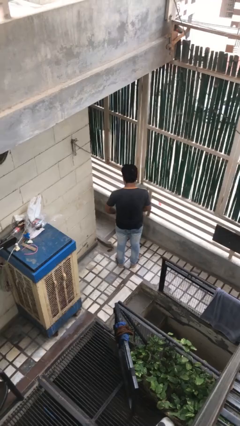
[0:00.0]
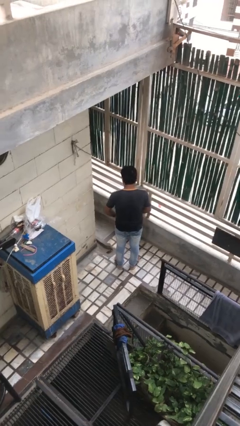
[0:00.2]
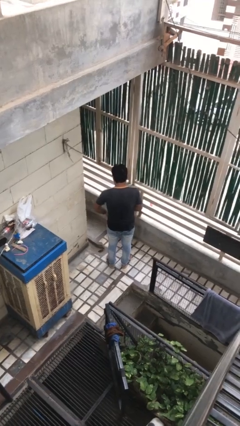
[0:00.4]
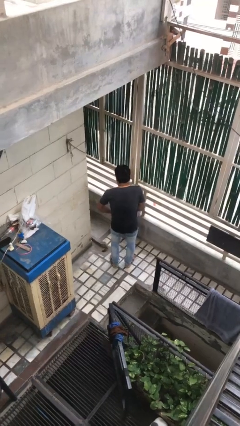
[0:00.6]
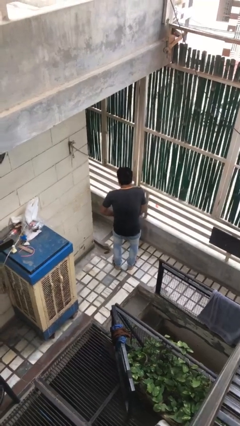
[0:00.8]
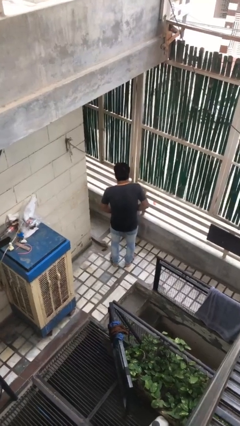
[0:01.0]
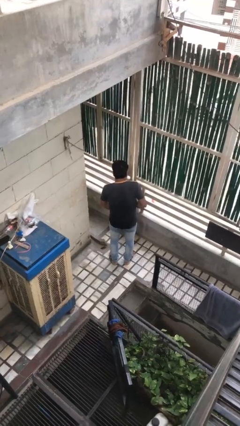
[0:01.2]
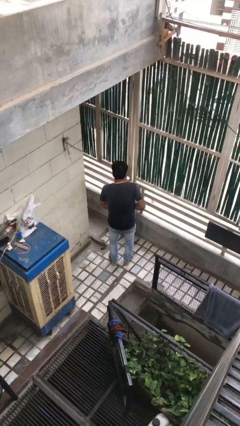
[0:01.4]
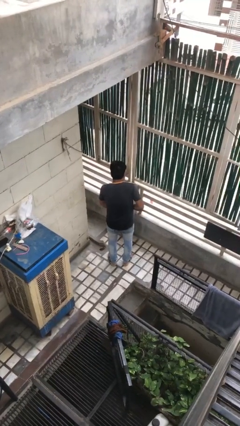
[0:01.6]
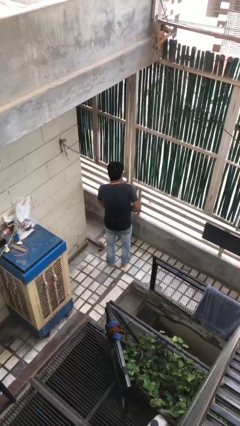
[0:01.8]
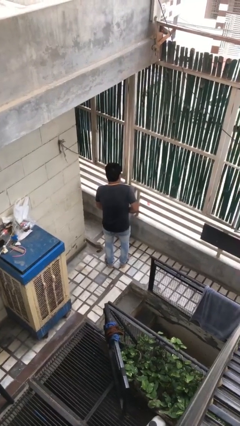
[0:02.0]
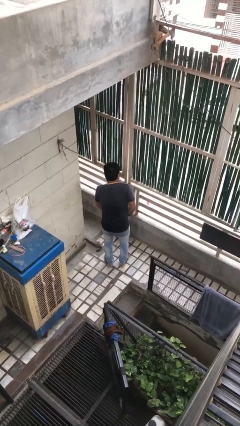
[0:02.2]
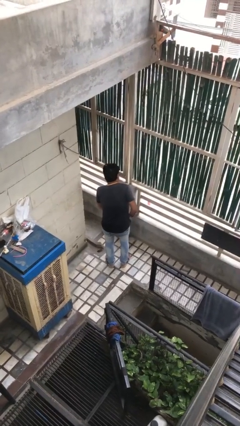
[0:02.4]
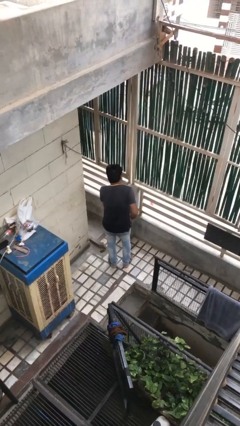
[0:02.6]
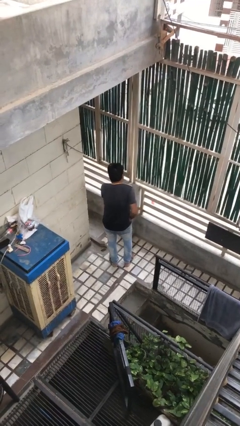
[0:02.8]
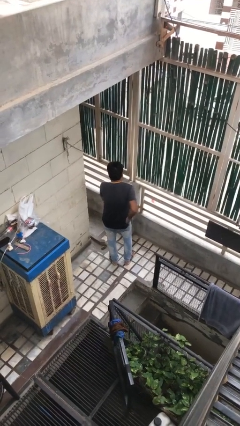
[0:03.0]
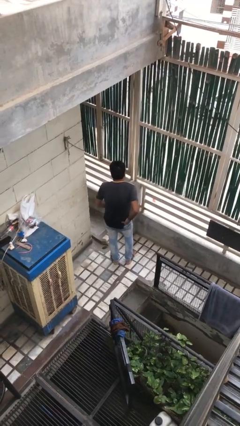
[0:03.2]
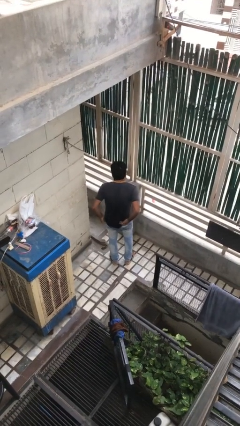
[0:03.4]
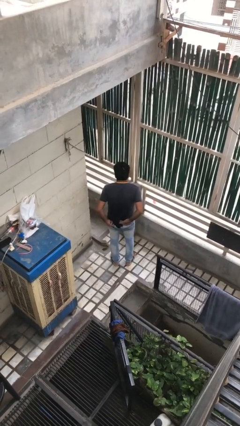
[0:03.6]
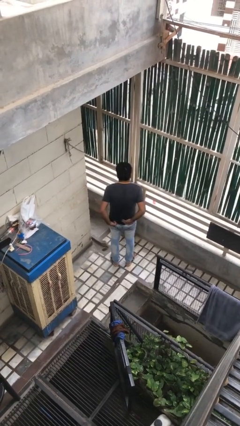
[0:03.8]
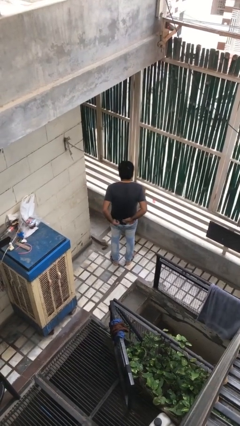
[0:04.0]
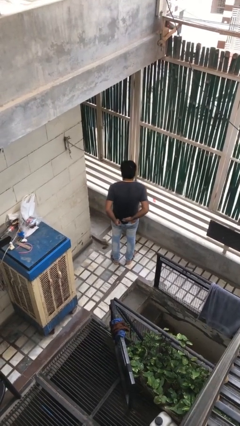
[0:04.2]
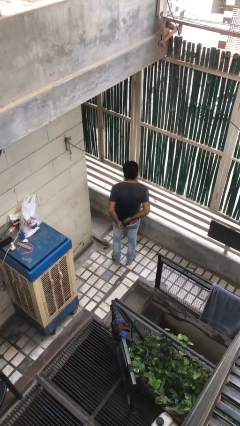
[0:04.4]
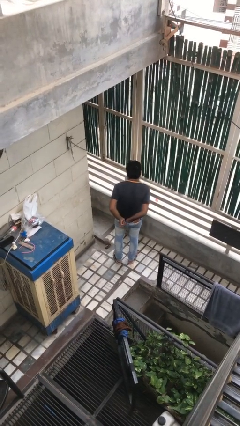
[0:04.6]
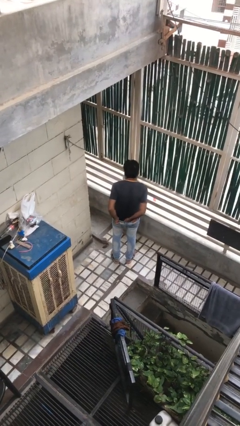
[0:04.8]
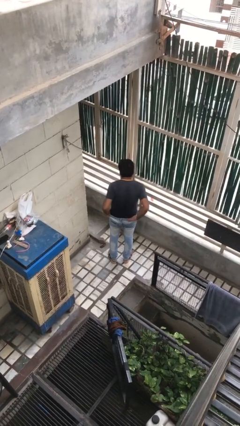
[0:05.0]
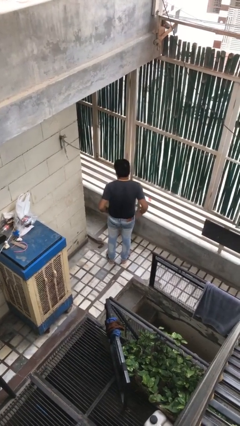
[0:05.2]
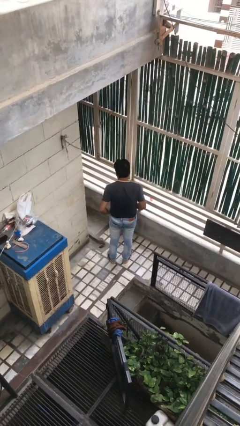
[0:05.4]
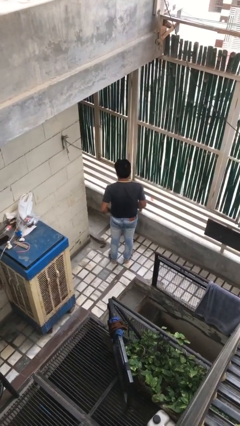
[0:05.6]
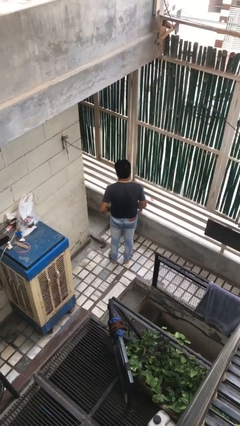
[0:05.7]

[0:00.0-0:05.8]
person tucks in shirt

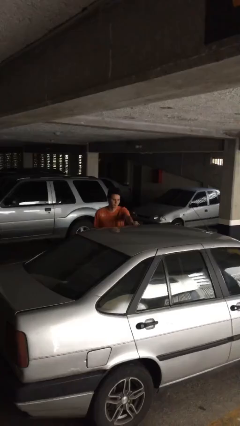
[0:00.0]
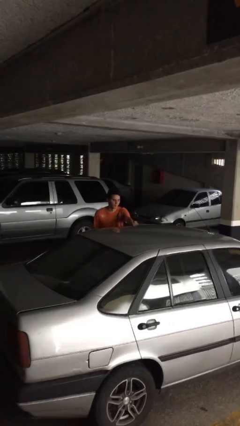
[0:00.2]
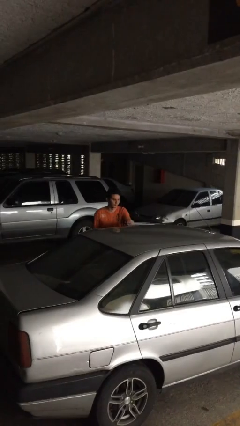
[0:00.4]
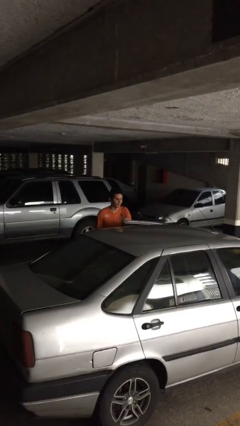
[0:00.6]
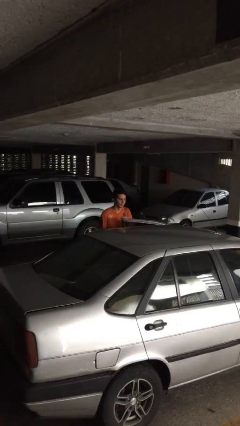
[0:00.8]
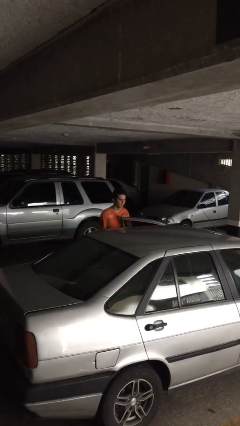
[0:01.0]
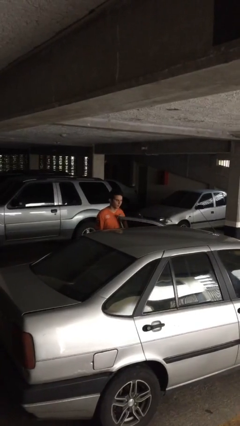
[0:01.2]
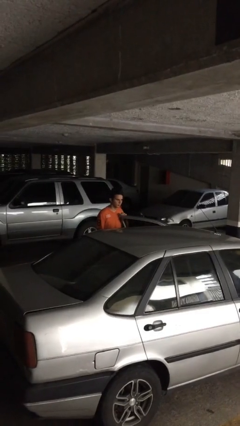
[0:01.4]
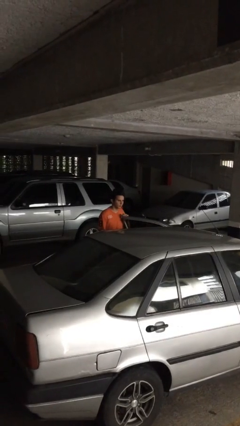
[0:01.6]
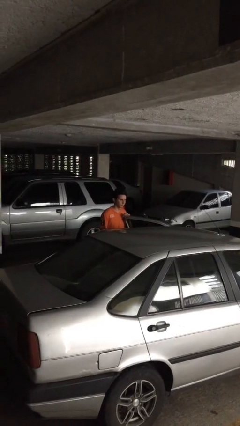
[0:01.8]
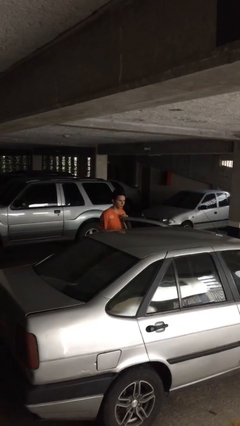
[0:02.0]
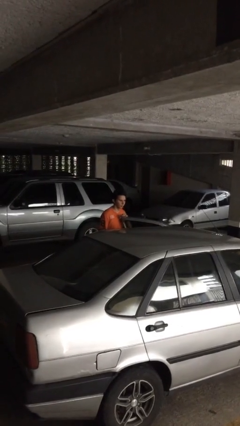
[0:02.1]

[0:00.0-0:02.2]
person opens car door

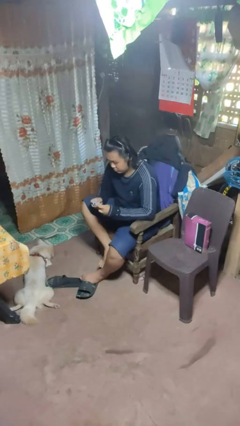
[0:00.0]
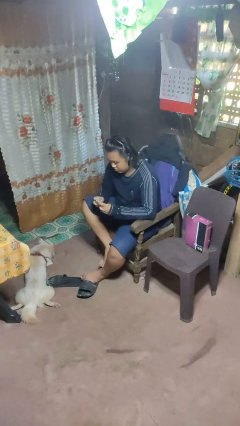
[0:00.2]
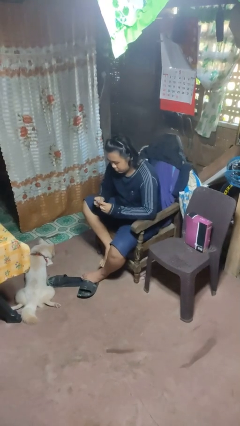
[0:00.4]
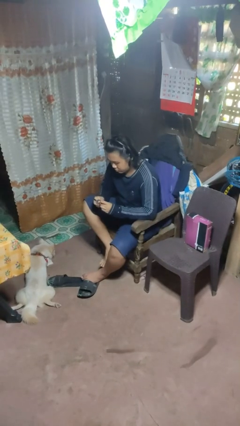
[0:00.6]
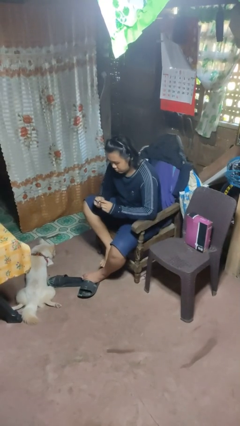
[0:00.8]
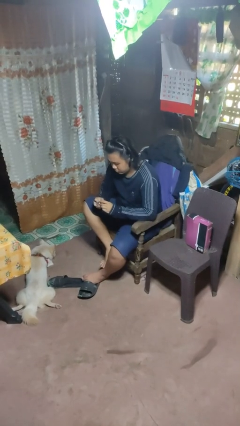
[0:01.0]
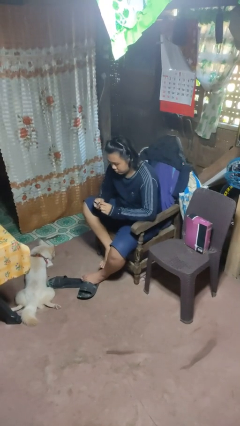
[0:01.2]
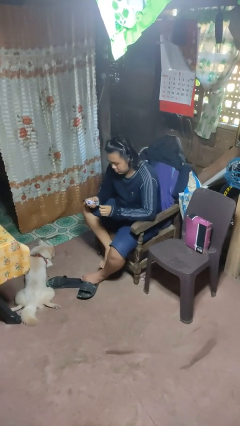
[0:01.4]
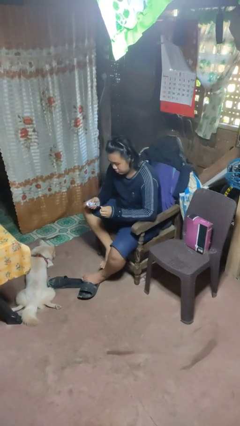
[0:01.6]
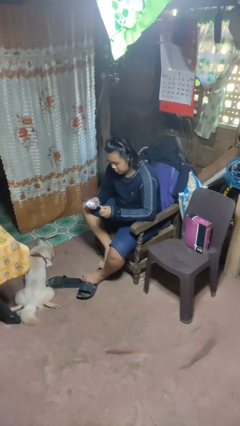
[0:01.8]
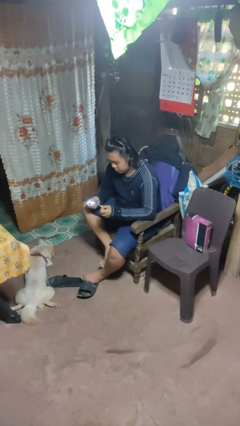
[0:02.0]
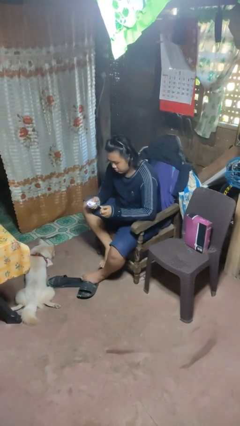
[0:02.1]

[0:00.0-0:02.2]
person files fingernails

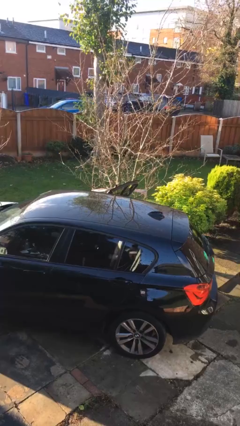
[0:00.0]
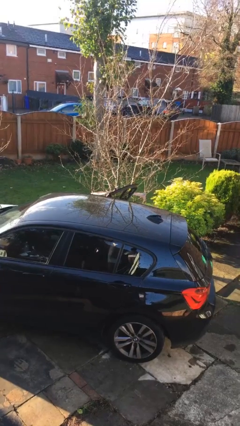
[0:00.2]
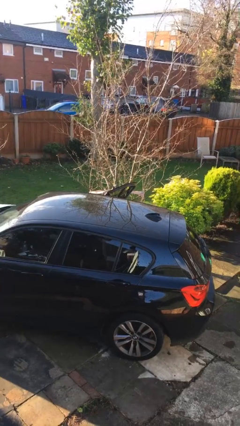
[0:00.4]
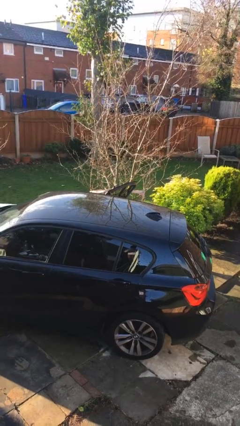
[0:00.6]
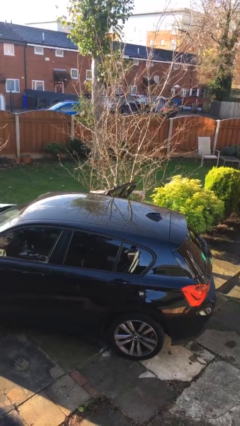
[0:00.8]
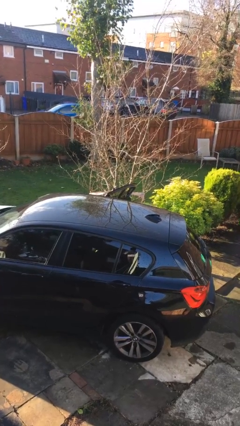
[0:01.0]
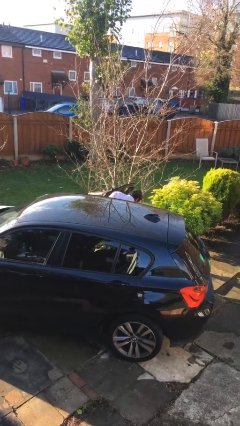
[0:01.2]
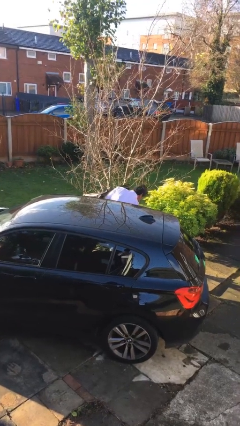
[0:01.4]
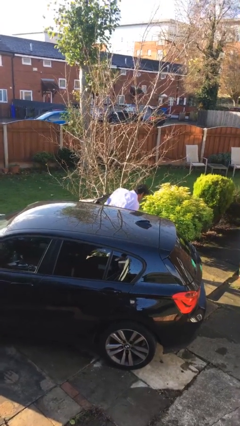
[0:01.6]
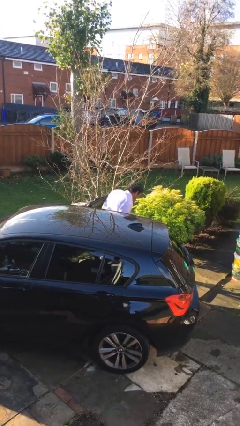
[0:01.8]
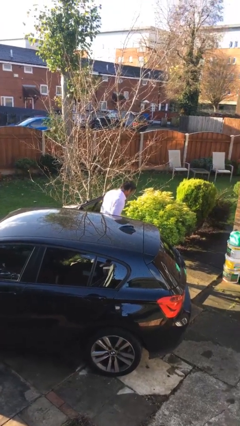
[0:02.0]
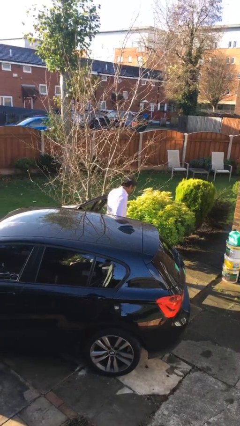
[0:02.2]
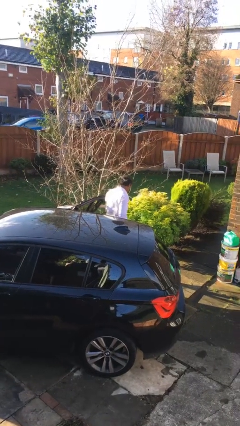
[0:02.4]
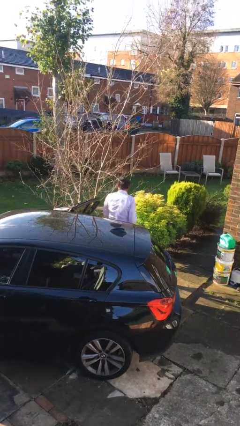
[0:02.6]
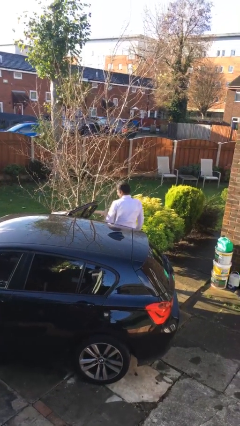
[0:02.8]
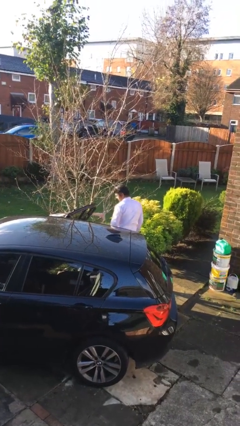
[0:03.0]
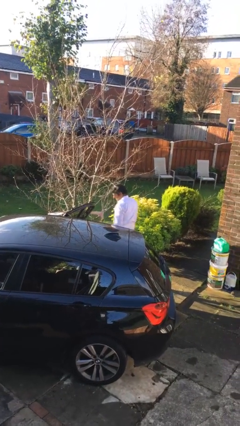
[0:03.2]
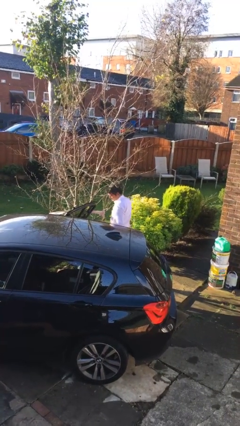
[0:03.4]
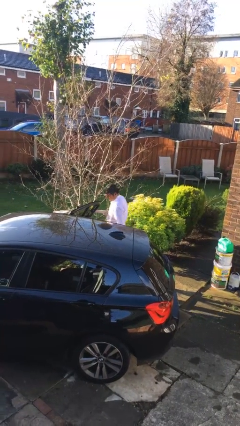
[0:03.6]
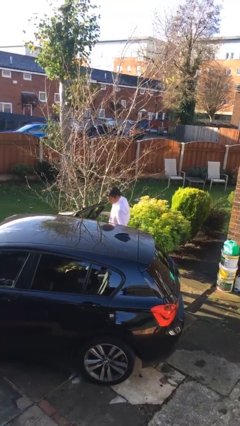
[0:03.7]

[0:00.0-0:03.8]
person exits car

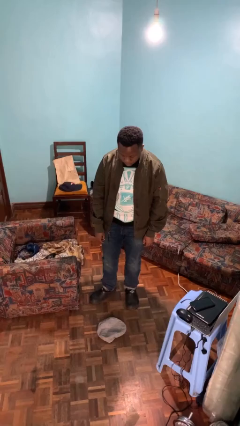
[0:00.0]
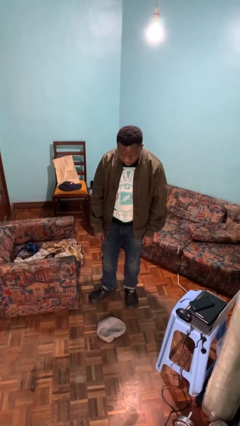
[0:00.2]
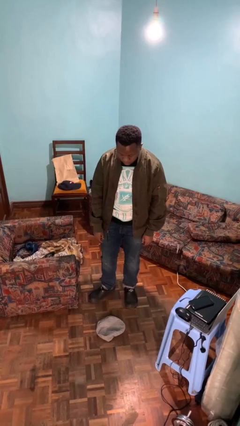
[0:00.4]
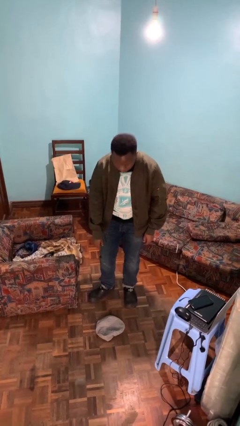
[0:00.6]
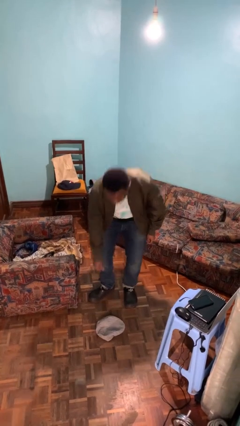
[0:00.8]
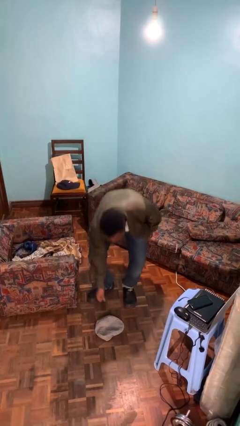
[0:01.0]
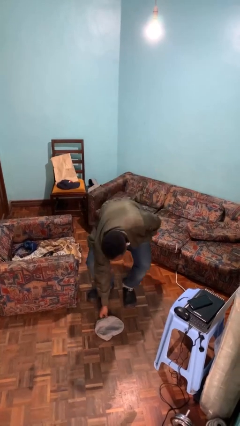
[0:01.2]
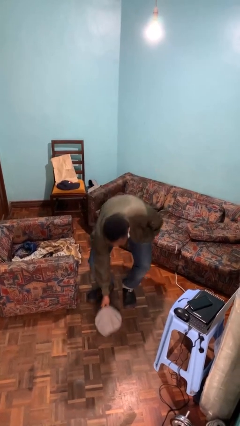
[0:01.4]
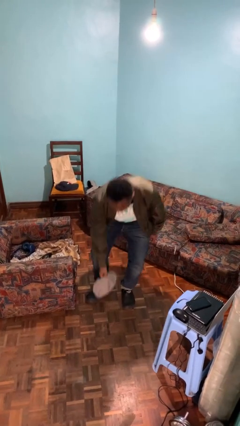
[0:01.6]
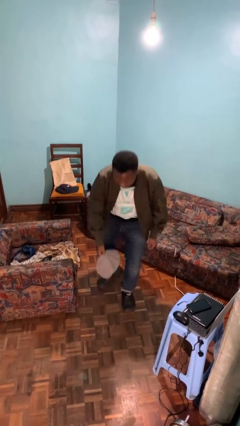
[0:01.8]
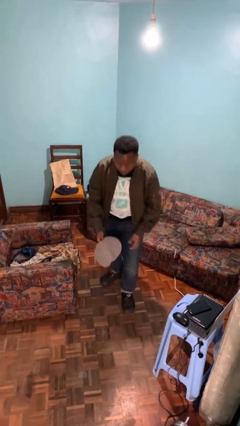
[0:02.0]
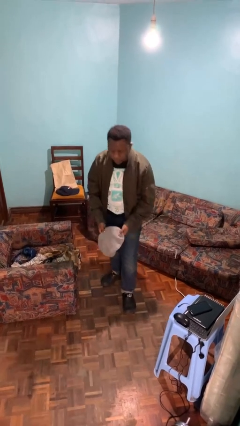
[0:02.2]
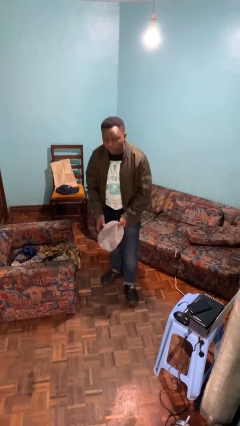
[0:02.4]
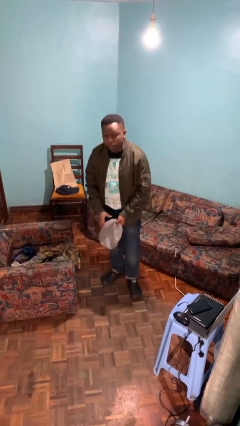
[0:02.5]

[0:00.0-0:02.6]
person picks up object from floor

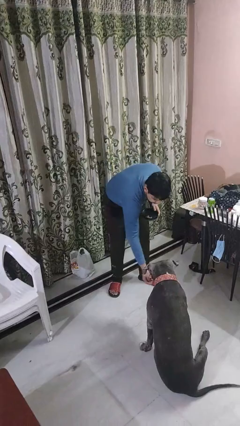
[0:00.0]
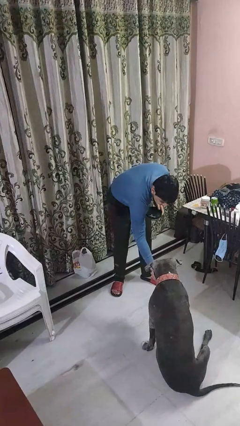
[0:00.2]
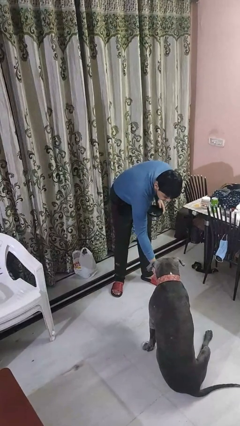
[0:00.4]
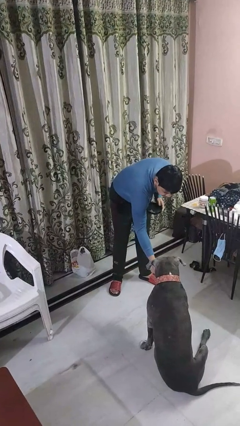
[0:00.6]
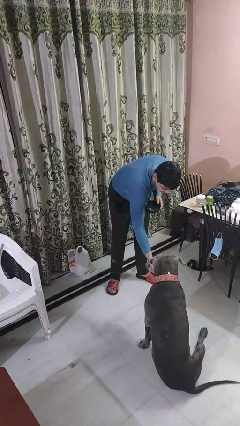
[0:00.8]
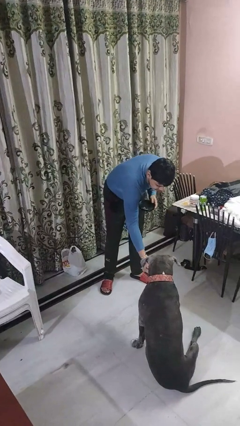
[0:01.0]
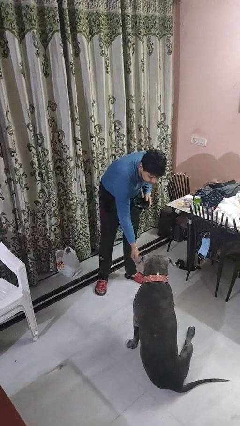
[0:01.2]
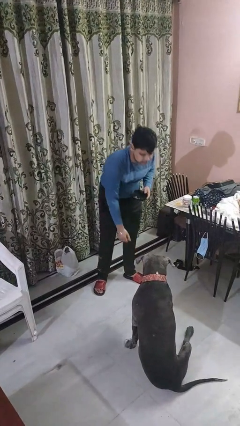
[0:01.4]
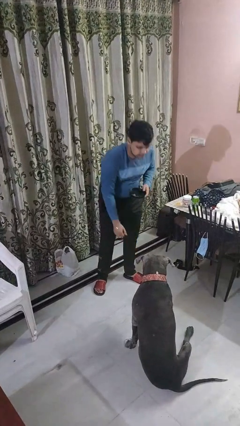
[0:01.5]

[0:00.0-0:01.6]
person feeds dog
